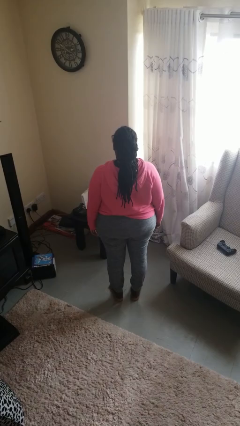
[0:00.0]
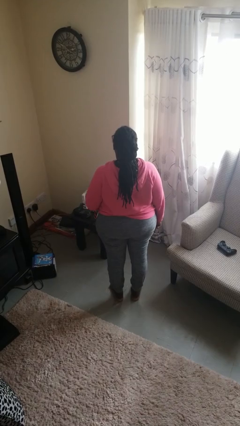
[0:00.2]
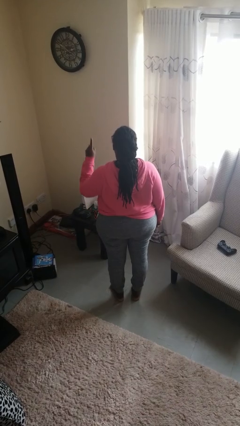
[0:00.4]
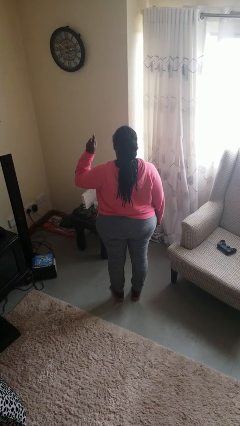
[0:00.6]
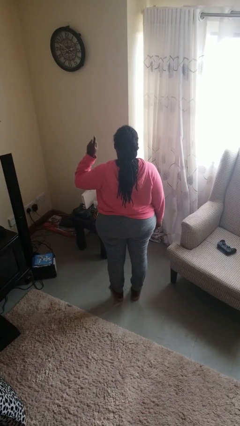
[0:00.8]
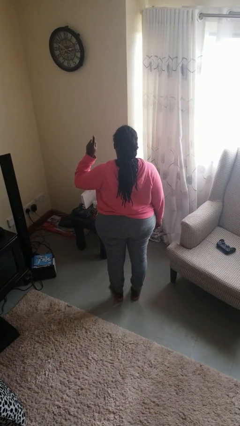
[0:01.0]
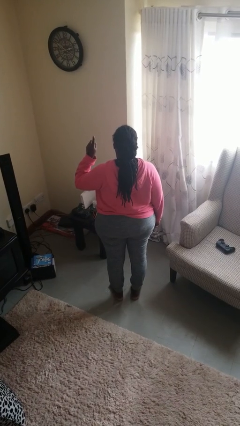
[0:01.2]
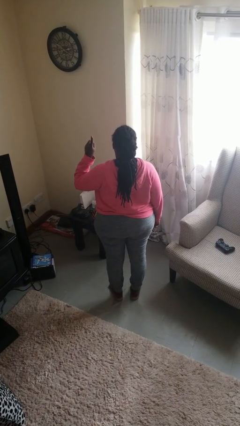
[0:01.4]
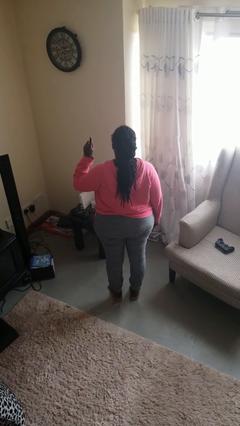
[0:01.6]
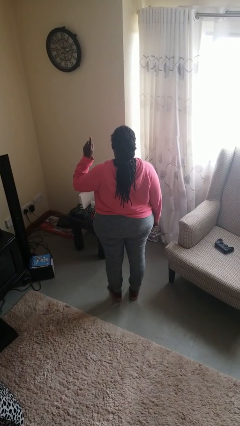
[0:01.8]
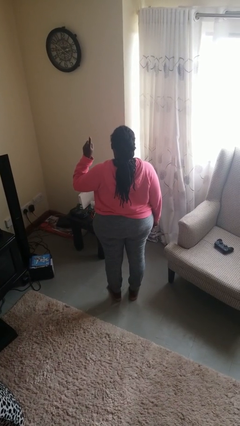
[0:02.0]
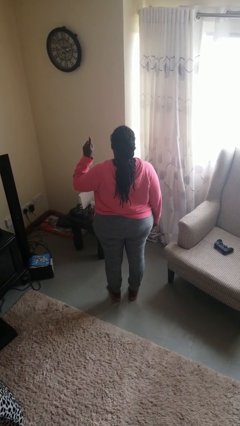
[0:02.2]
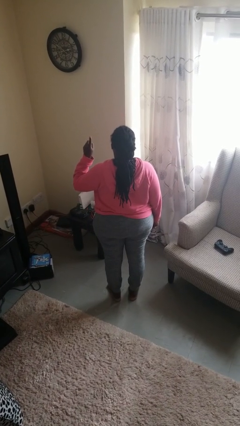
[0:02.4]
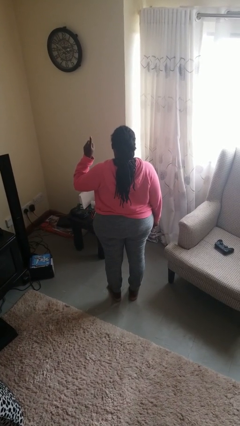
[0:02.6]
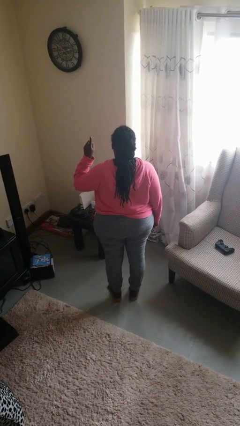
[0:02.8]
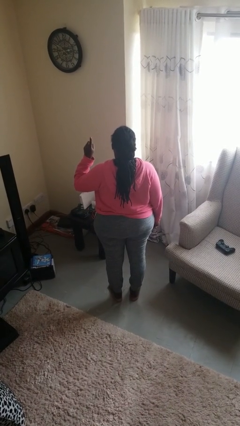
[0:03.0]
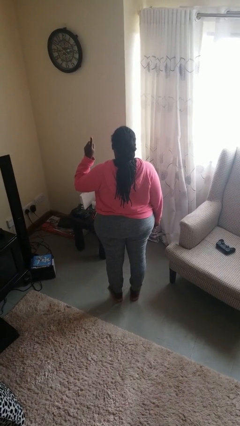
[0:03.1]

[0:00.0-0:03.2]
person gestures number one

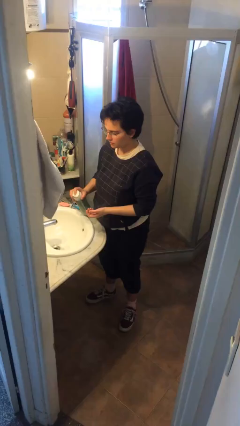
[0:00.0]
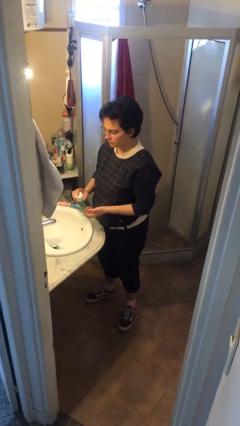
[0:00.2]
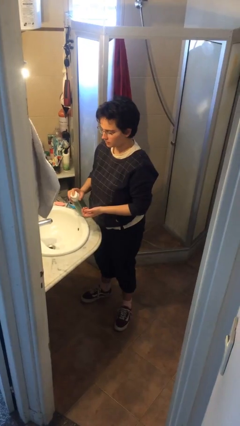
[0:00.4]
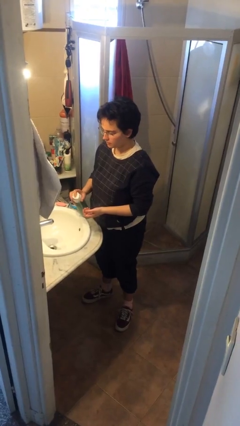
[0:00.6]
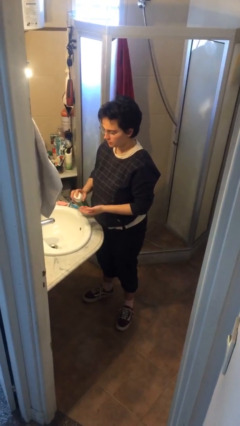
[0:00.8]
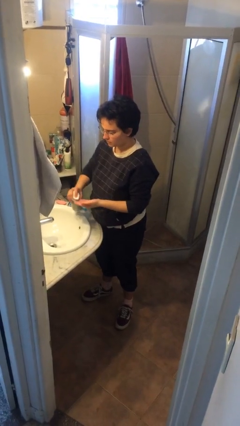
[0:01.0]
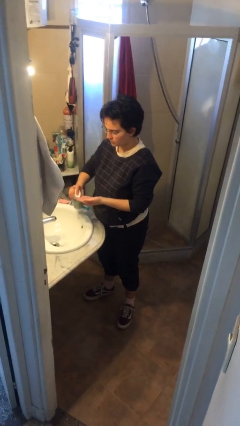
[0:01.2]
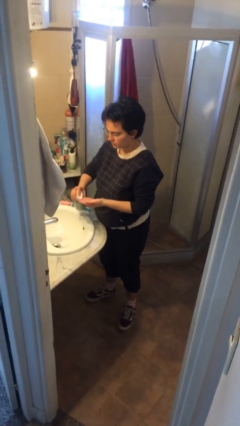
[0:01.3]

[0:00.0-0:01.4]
person applies shaving cream

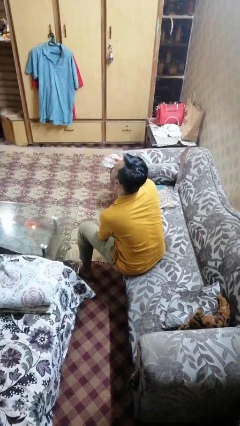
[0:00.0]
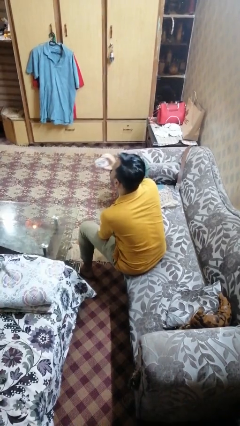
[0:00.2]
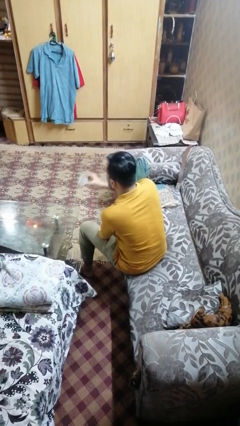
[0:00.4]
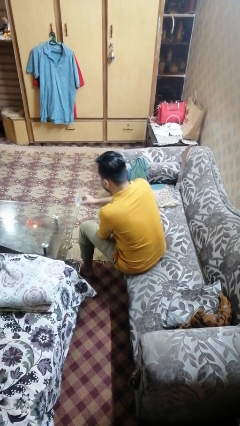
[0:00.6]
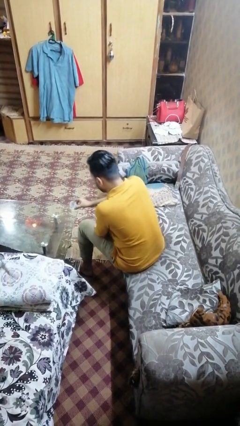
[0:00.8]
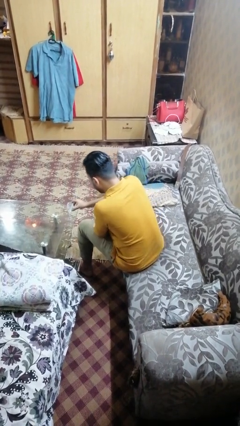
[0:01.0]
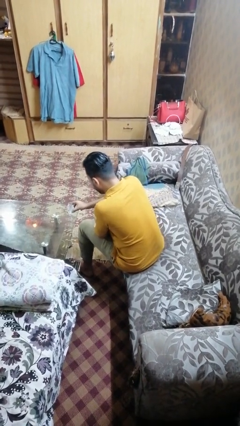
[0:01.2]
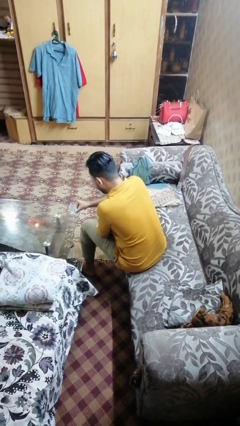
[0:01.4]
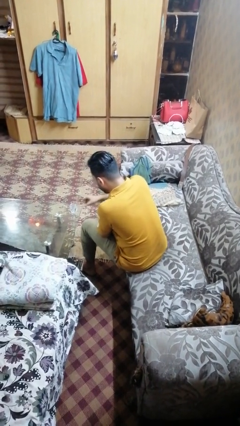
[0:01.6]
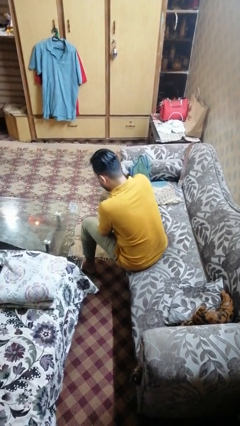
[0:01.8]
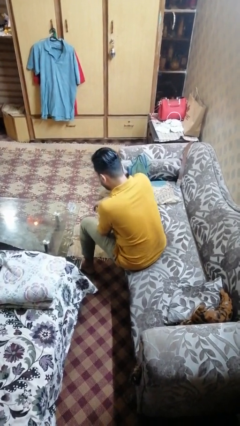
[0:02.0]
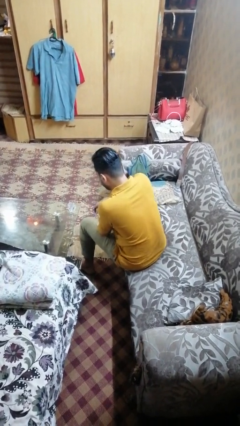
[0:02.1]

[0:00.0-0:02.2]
person puts down object on table

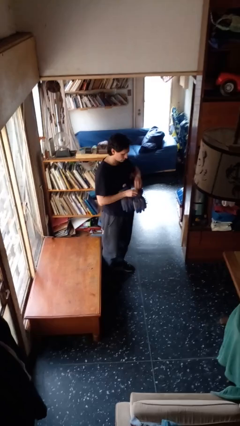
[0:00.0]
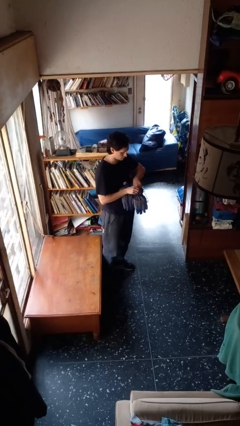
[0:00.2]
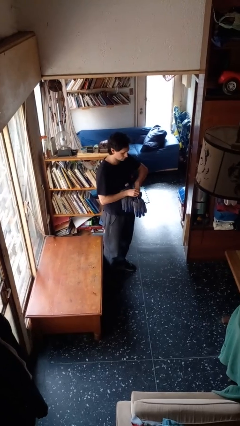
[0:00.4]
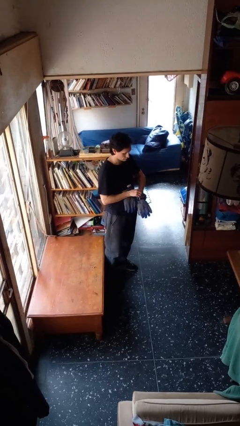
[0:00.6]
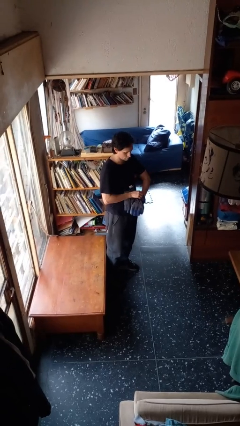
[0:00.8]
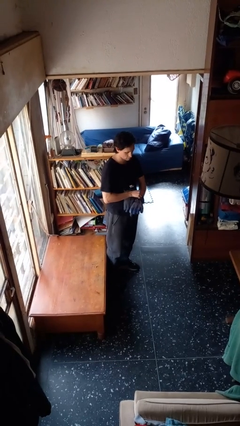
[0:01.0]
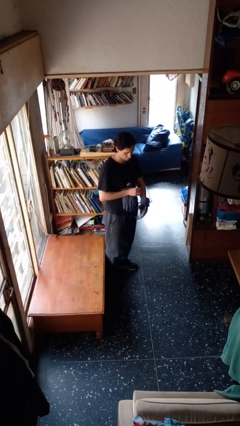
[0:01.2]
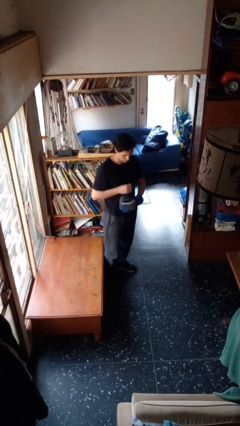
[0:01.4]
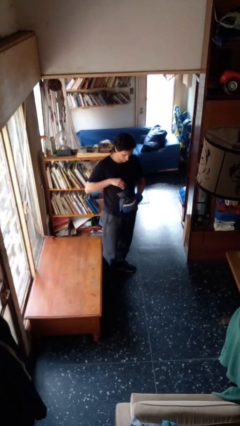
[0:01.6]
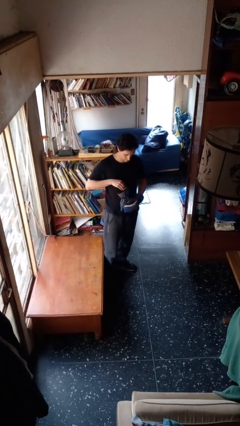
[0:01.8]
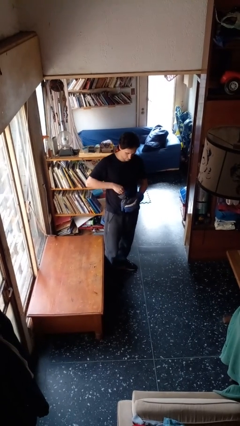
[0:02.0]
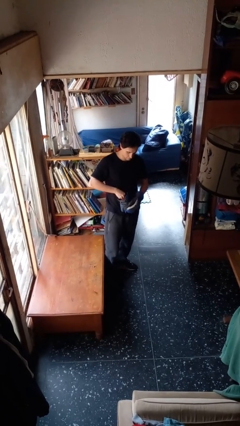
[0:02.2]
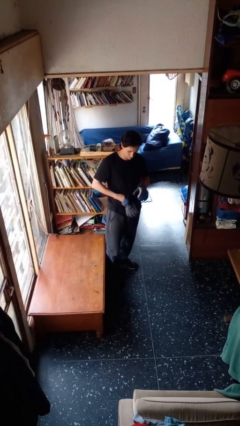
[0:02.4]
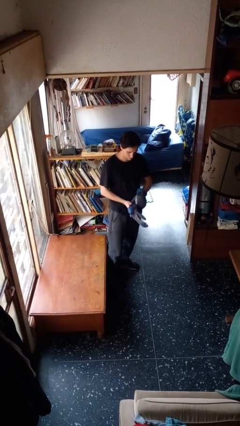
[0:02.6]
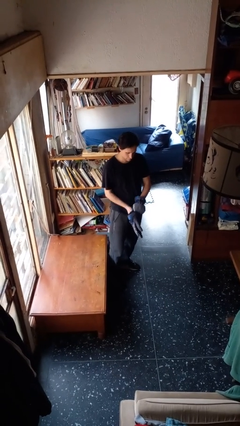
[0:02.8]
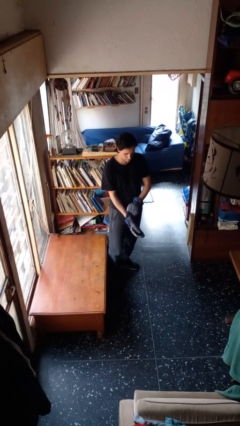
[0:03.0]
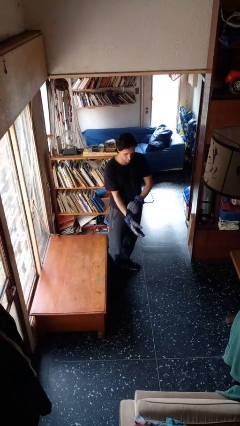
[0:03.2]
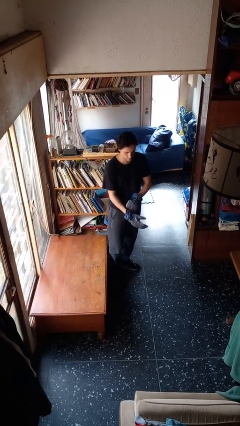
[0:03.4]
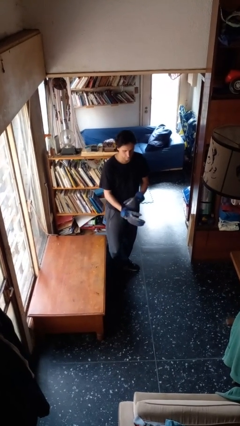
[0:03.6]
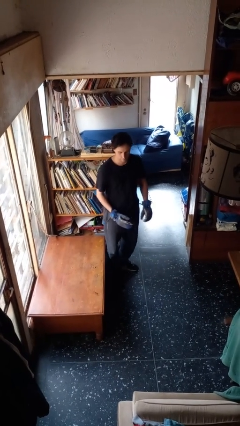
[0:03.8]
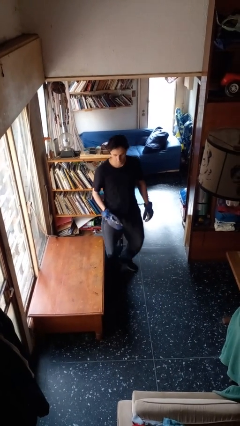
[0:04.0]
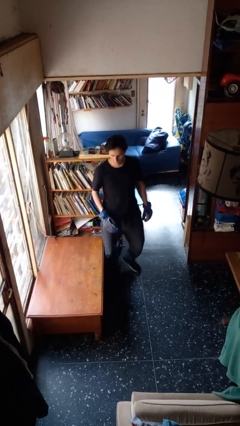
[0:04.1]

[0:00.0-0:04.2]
person puts on gloves

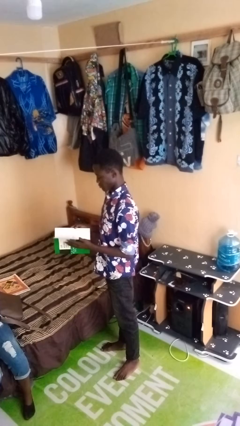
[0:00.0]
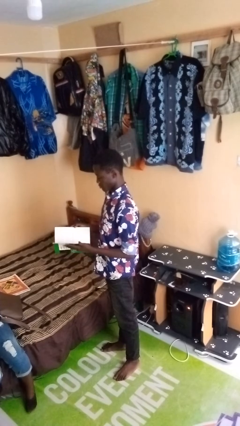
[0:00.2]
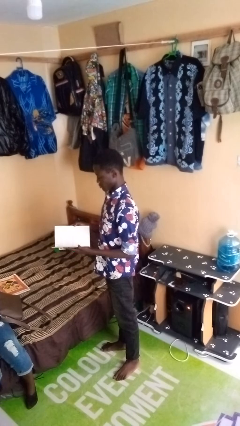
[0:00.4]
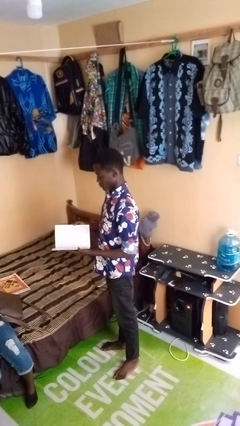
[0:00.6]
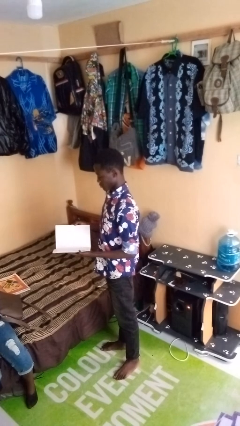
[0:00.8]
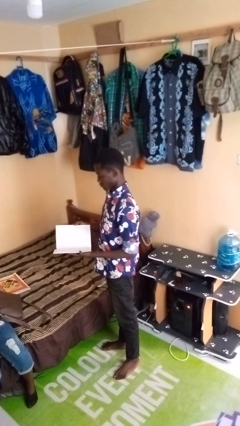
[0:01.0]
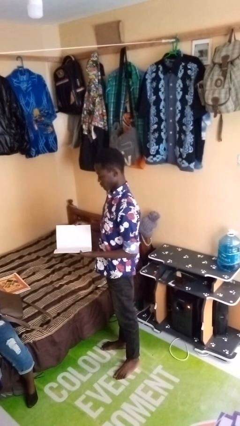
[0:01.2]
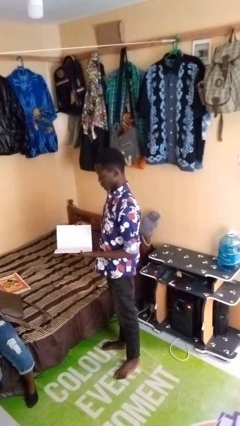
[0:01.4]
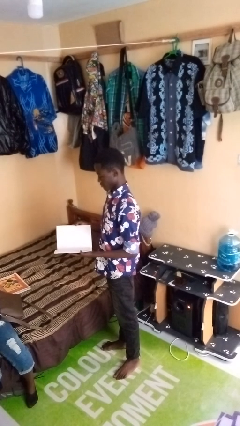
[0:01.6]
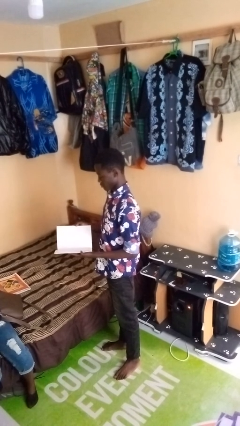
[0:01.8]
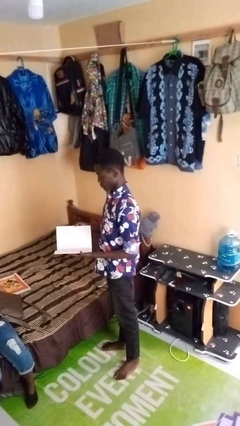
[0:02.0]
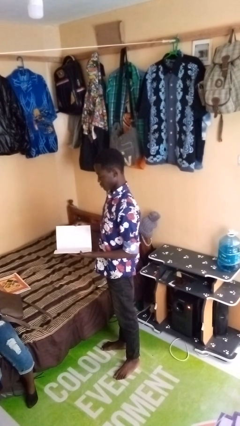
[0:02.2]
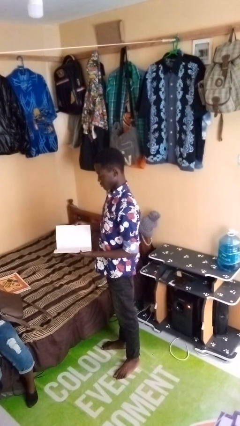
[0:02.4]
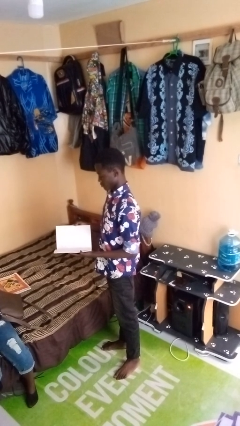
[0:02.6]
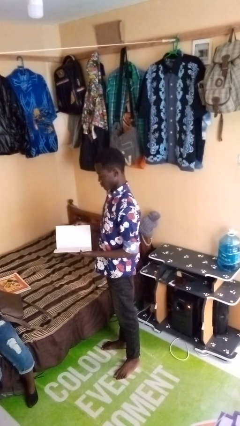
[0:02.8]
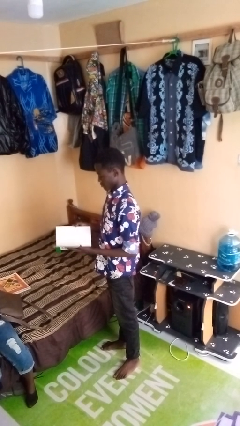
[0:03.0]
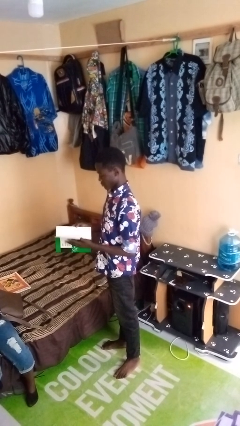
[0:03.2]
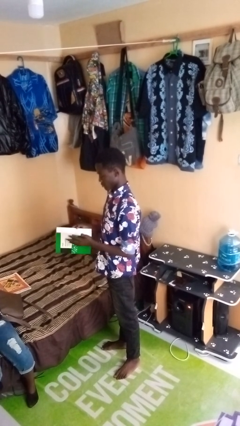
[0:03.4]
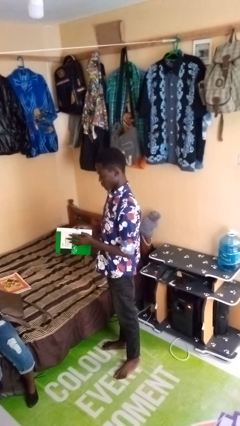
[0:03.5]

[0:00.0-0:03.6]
person reads magazine

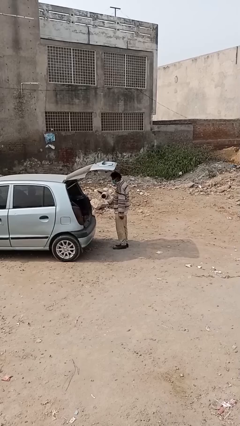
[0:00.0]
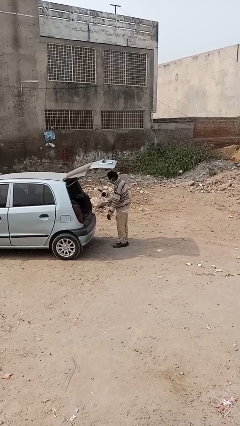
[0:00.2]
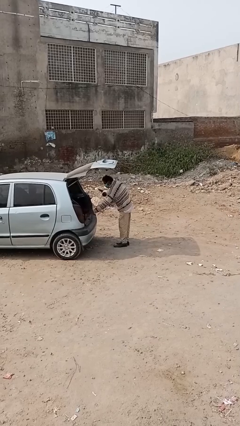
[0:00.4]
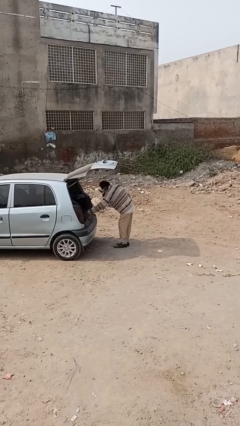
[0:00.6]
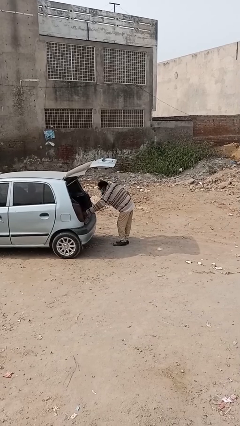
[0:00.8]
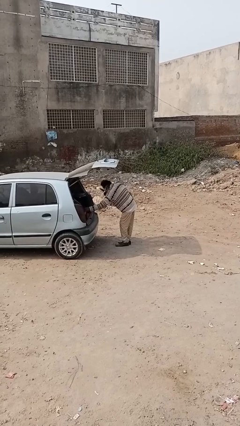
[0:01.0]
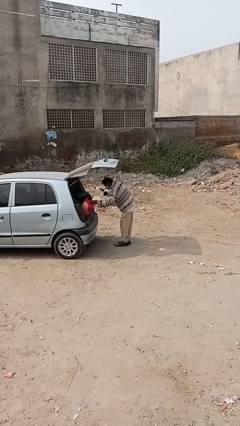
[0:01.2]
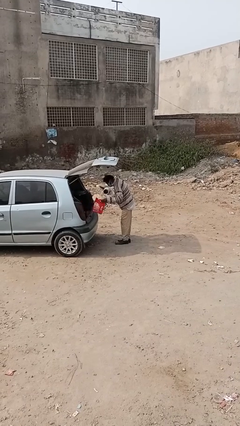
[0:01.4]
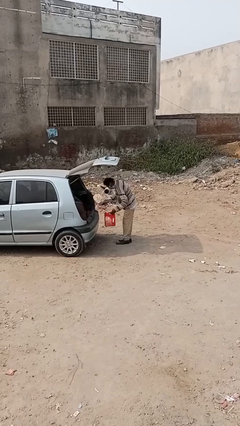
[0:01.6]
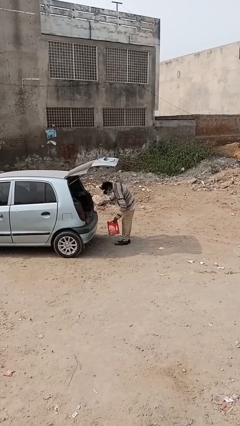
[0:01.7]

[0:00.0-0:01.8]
person unloads car

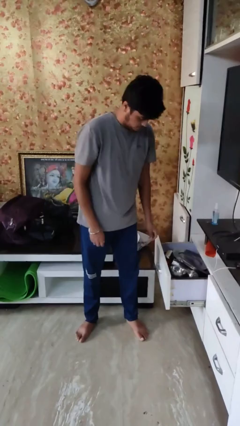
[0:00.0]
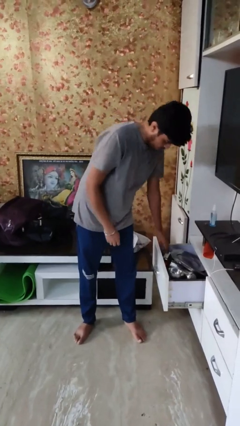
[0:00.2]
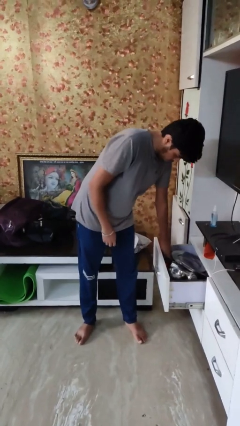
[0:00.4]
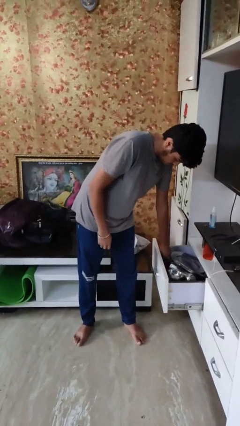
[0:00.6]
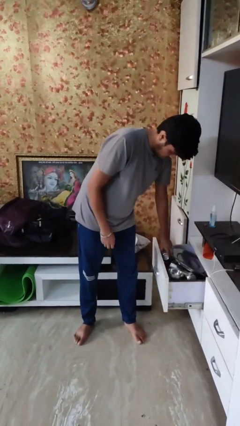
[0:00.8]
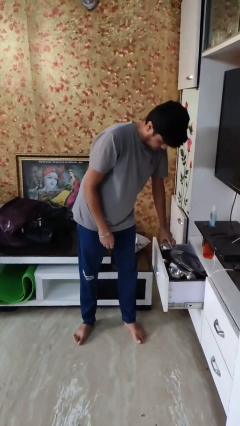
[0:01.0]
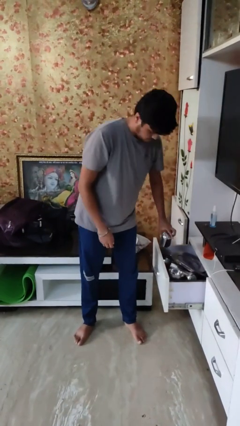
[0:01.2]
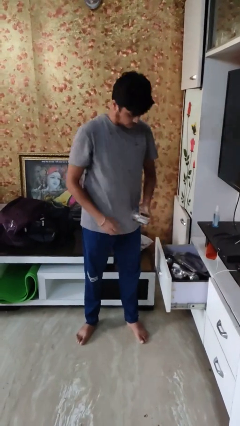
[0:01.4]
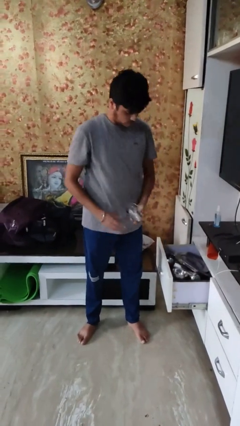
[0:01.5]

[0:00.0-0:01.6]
person takes object from kitchen drawer
